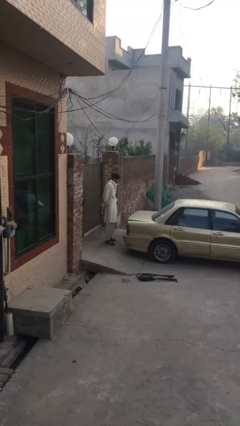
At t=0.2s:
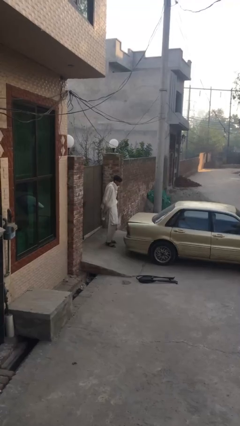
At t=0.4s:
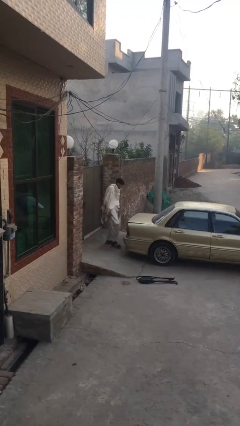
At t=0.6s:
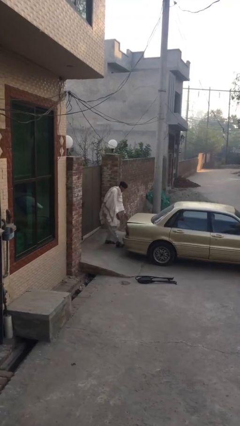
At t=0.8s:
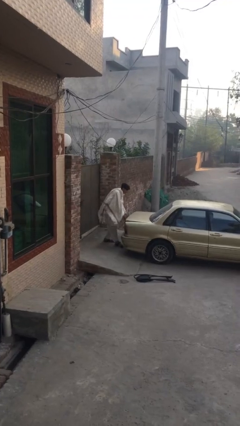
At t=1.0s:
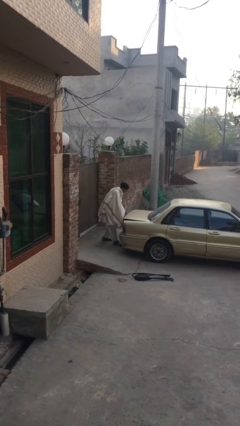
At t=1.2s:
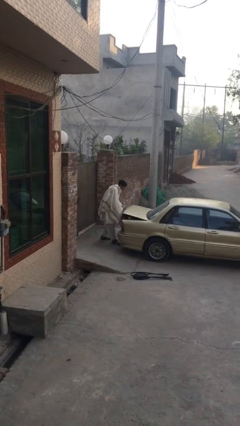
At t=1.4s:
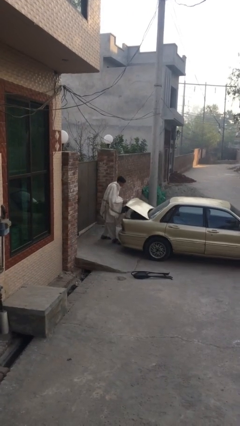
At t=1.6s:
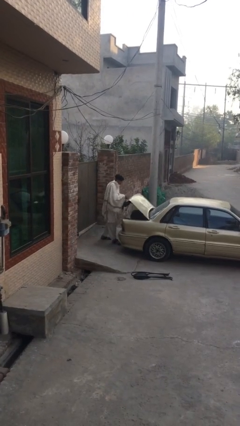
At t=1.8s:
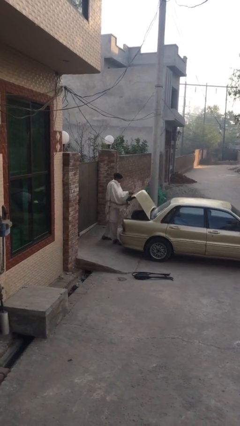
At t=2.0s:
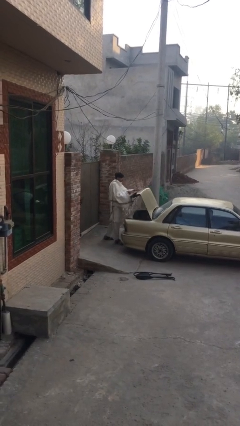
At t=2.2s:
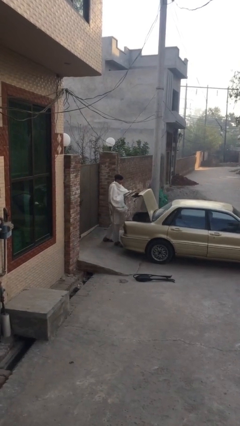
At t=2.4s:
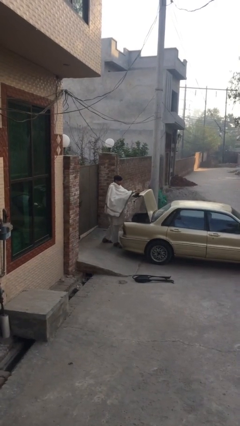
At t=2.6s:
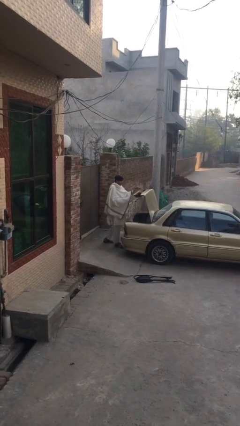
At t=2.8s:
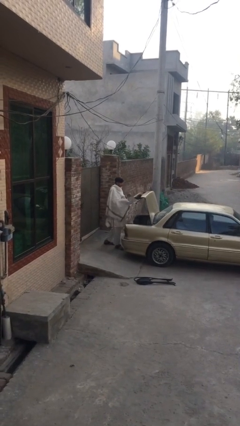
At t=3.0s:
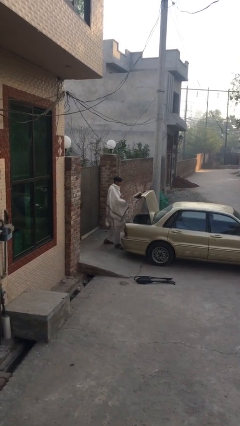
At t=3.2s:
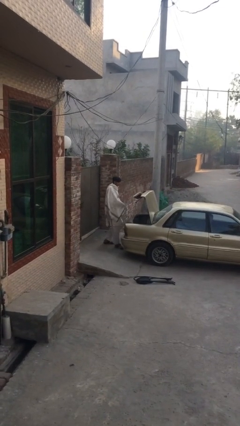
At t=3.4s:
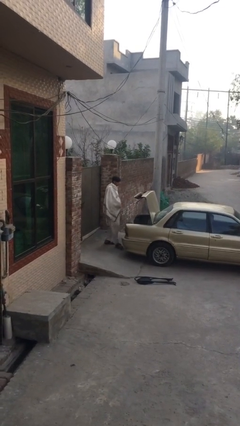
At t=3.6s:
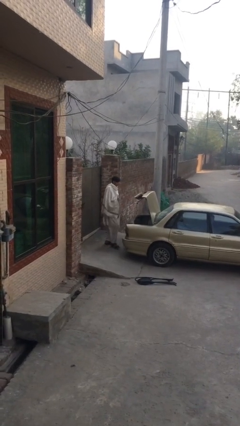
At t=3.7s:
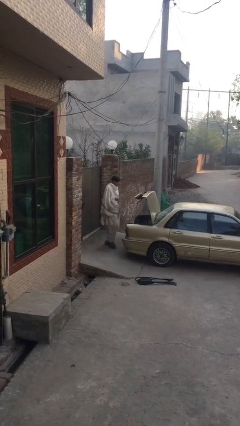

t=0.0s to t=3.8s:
person opens car trunk

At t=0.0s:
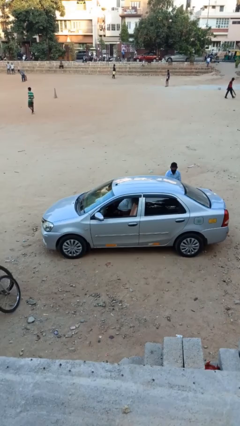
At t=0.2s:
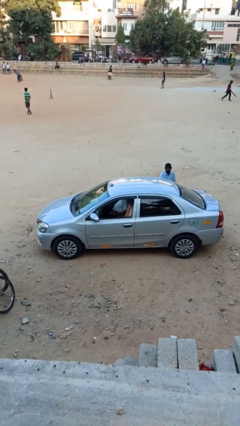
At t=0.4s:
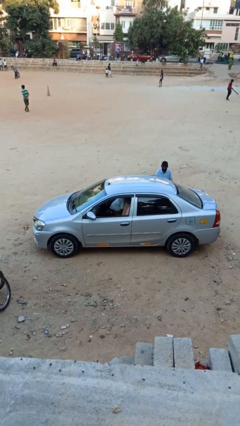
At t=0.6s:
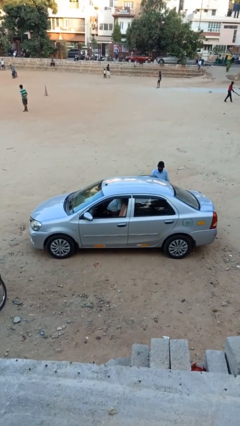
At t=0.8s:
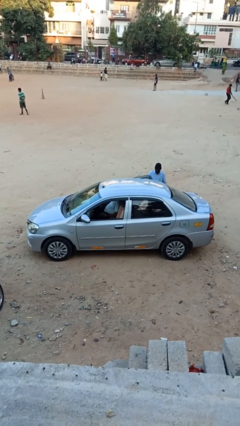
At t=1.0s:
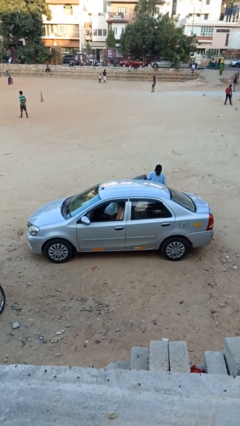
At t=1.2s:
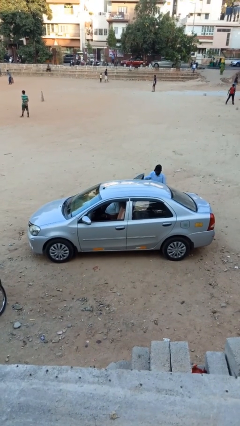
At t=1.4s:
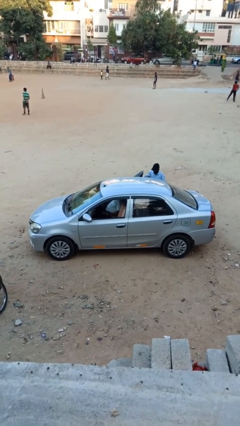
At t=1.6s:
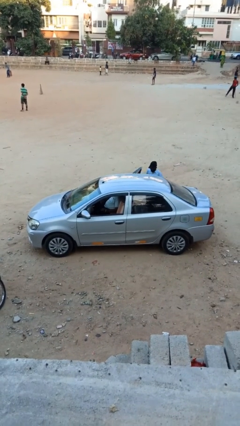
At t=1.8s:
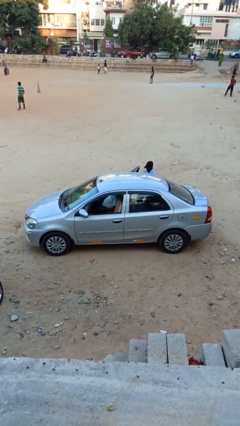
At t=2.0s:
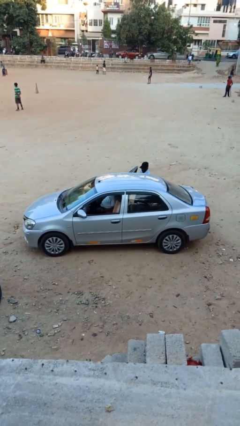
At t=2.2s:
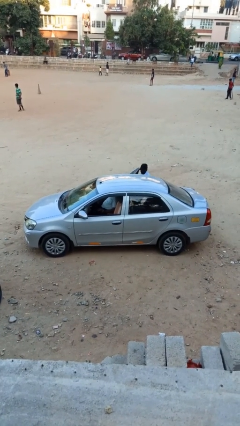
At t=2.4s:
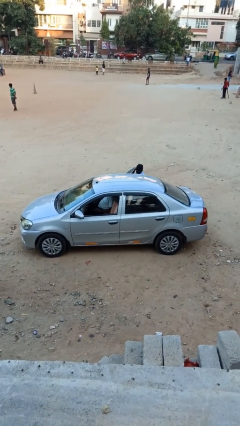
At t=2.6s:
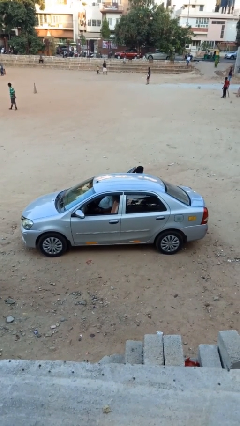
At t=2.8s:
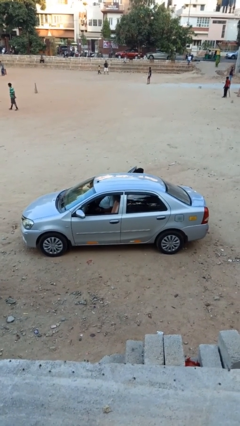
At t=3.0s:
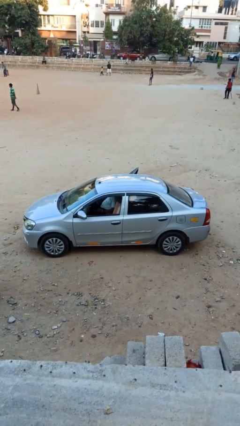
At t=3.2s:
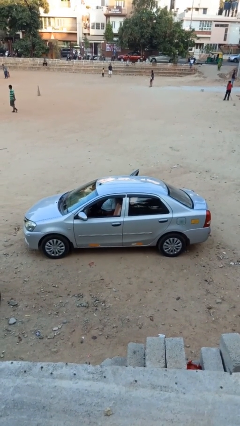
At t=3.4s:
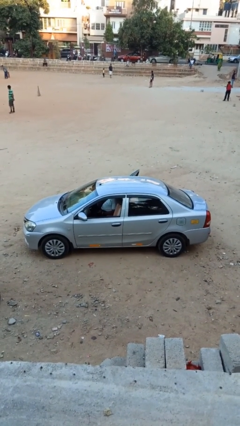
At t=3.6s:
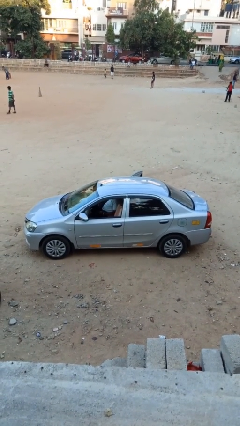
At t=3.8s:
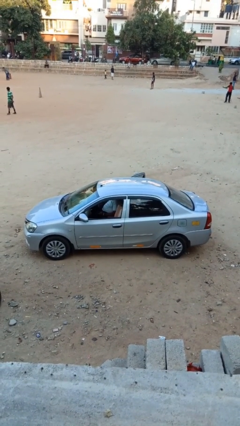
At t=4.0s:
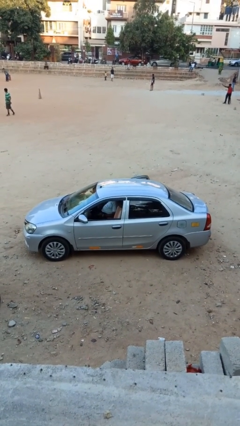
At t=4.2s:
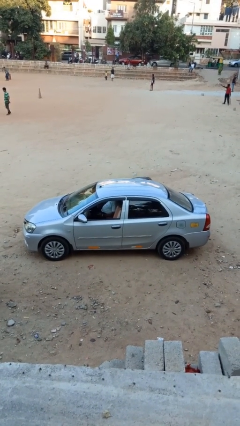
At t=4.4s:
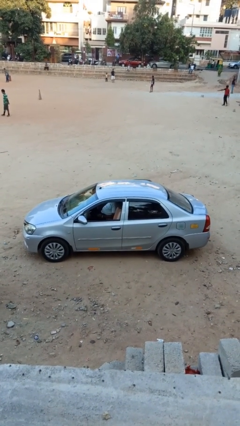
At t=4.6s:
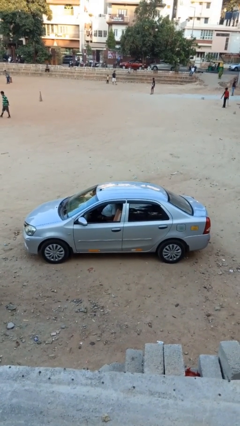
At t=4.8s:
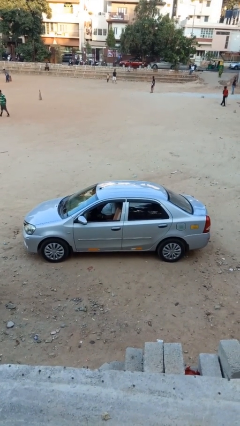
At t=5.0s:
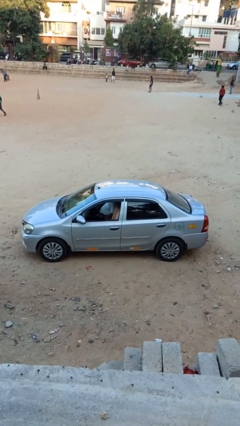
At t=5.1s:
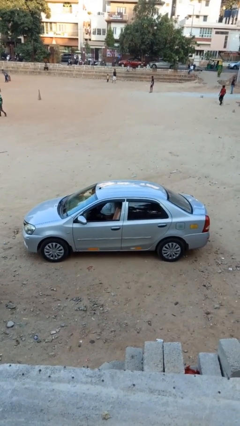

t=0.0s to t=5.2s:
car picks up person

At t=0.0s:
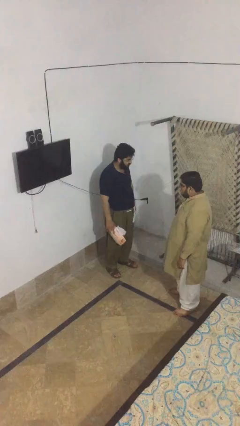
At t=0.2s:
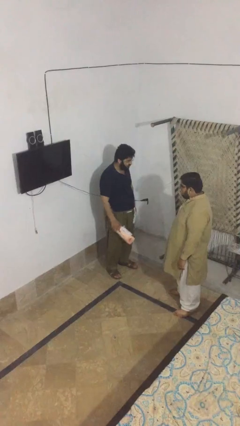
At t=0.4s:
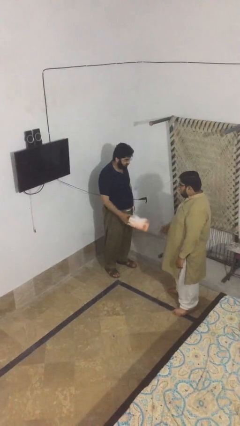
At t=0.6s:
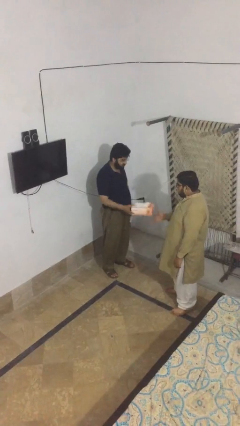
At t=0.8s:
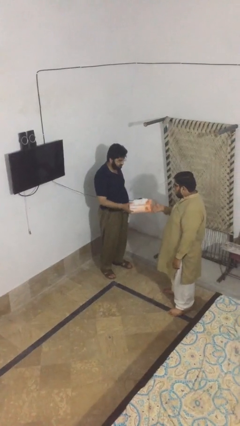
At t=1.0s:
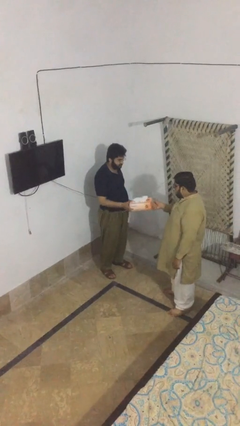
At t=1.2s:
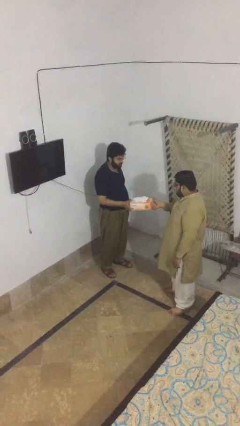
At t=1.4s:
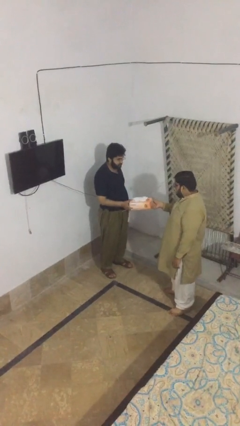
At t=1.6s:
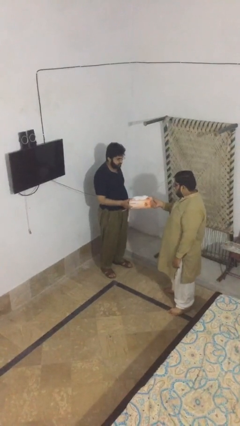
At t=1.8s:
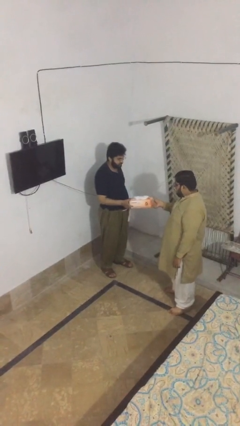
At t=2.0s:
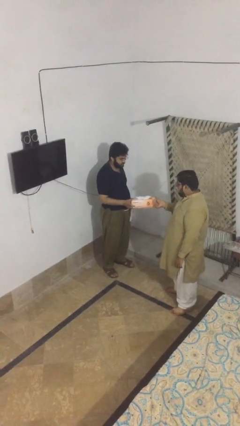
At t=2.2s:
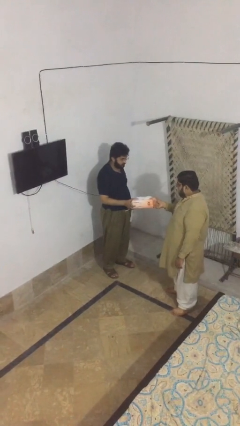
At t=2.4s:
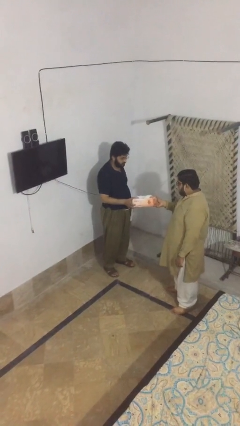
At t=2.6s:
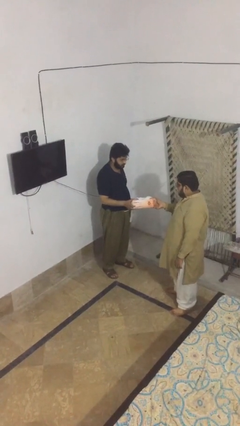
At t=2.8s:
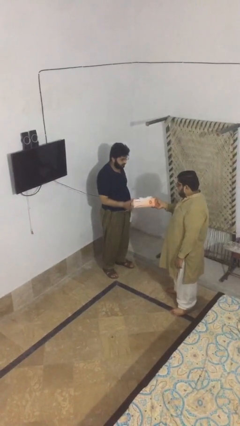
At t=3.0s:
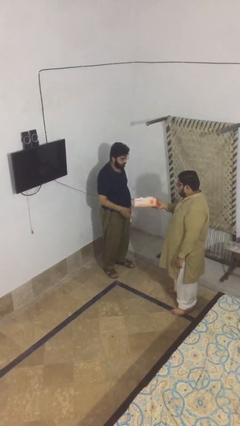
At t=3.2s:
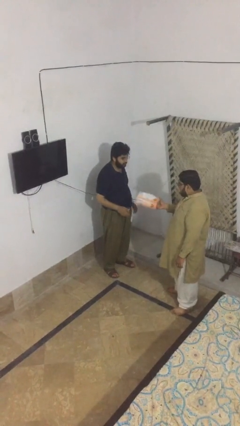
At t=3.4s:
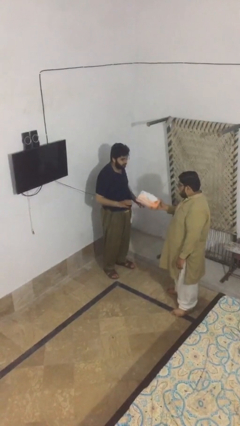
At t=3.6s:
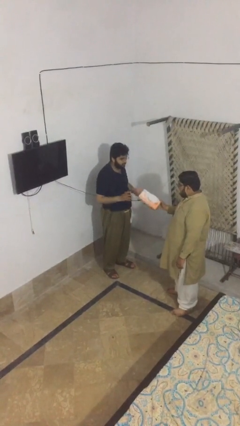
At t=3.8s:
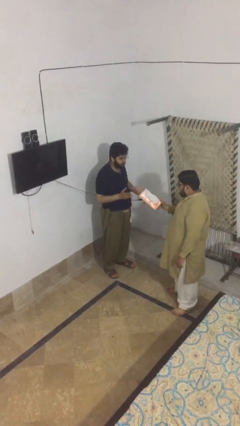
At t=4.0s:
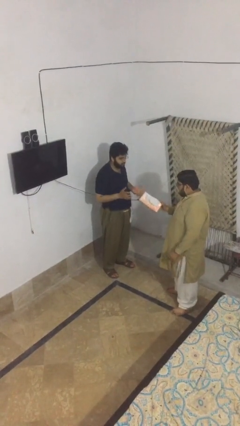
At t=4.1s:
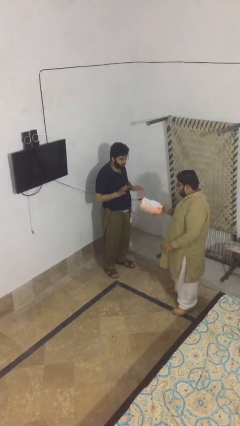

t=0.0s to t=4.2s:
person transfers object to person

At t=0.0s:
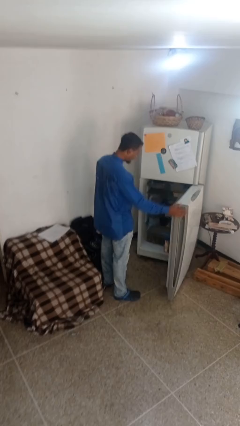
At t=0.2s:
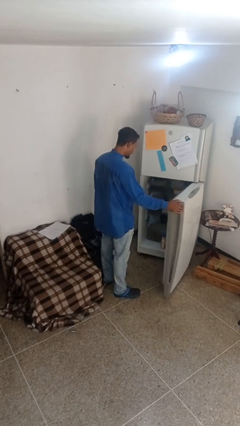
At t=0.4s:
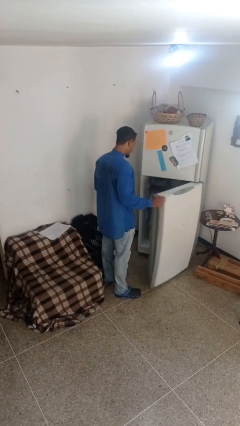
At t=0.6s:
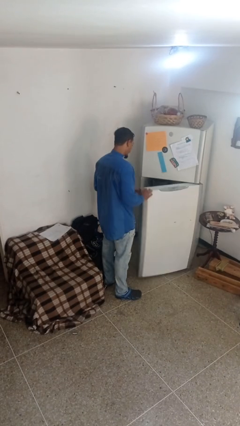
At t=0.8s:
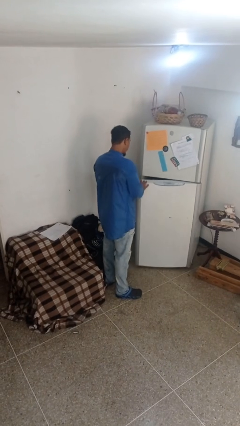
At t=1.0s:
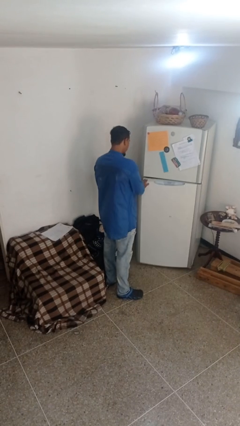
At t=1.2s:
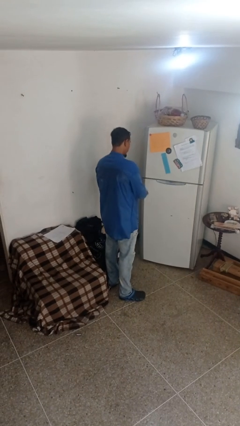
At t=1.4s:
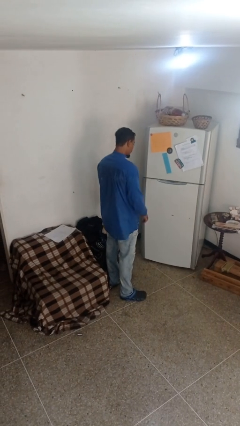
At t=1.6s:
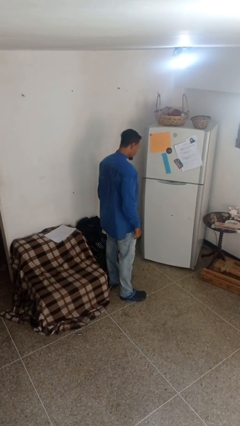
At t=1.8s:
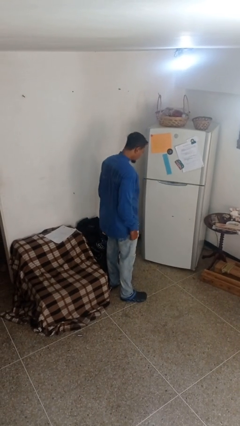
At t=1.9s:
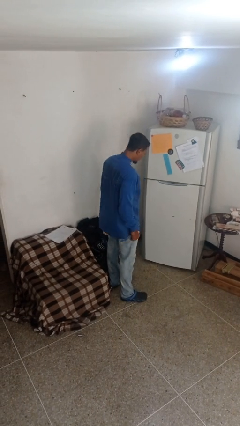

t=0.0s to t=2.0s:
person closes refrigerator

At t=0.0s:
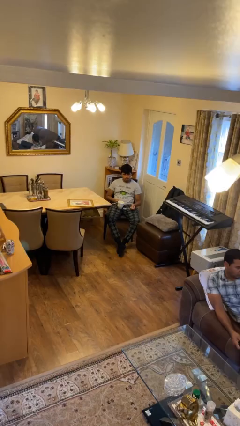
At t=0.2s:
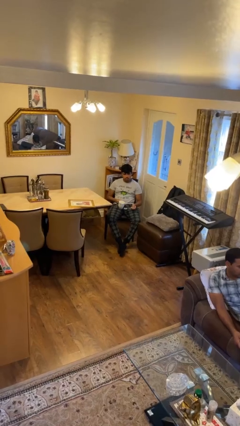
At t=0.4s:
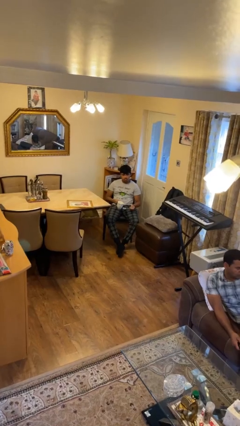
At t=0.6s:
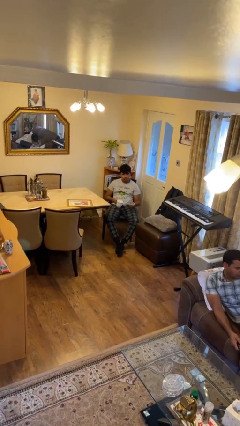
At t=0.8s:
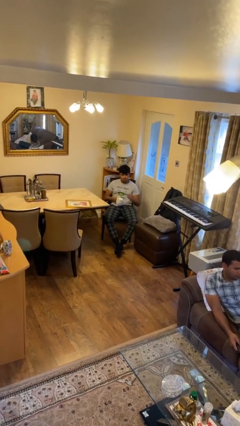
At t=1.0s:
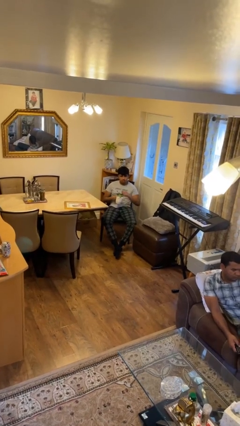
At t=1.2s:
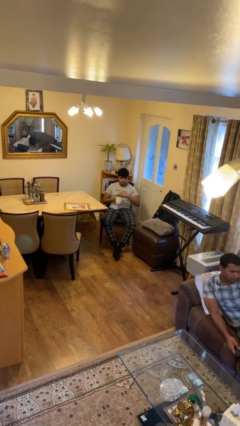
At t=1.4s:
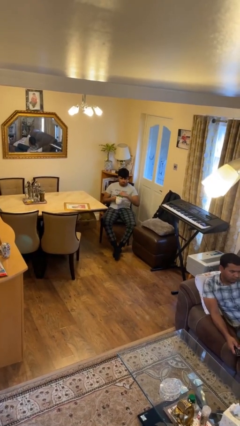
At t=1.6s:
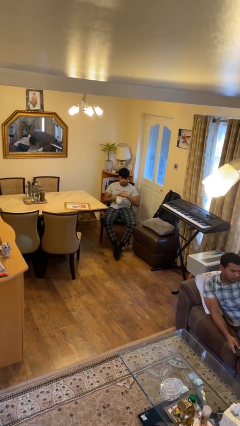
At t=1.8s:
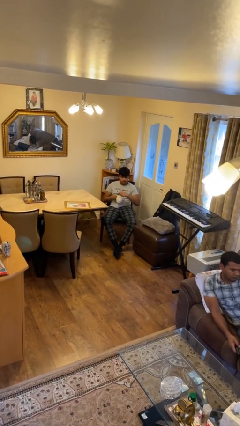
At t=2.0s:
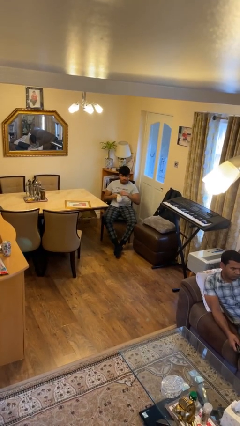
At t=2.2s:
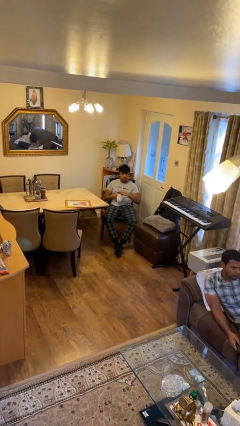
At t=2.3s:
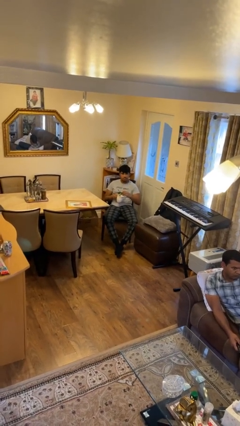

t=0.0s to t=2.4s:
person stirs mug

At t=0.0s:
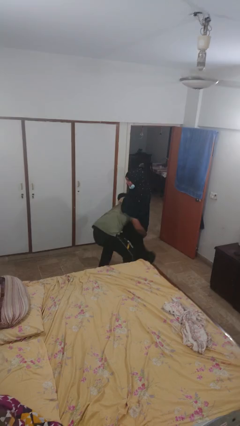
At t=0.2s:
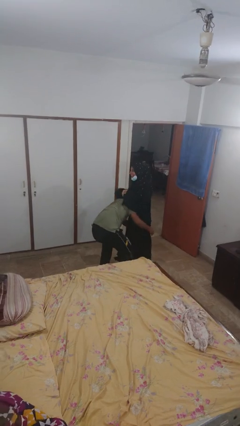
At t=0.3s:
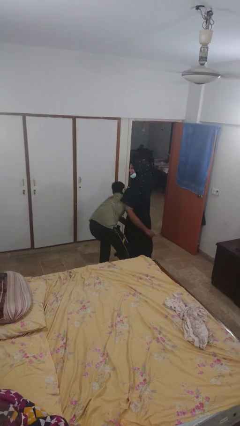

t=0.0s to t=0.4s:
person puts down person
